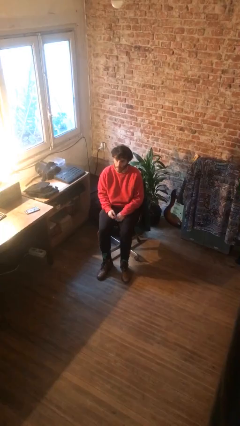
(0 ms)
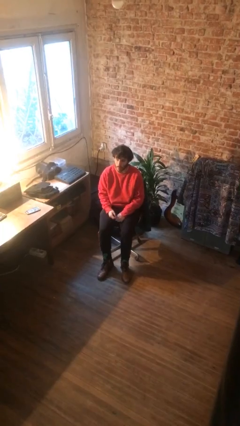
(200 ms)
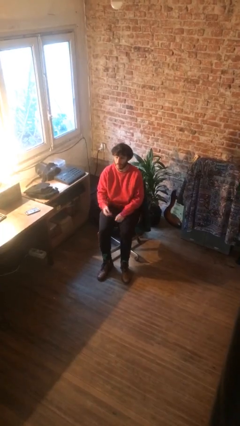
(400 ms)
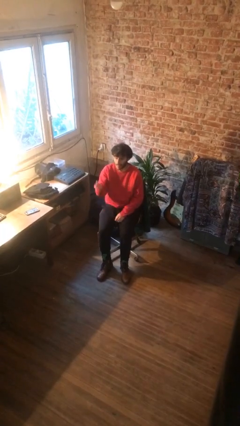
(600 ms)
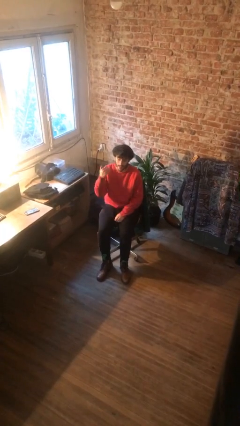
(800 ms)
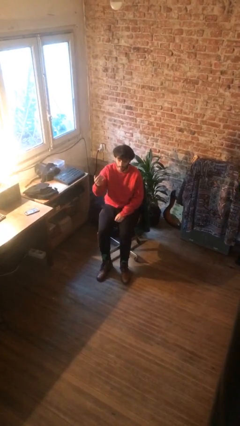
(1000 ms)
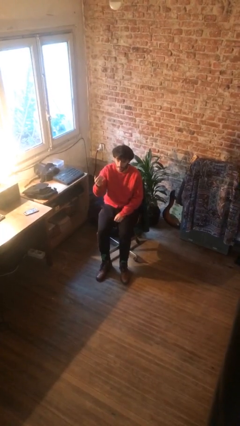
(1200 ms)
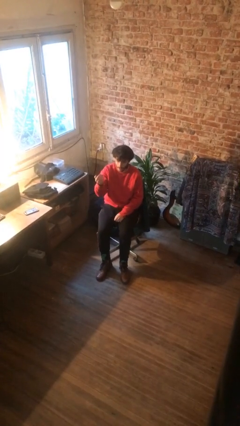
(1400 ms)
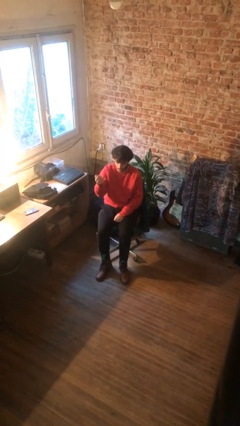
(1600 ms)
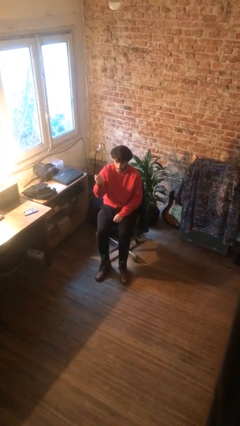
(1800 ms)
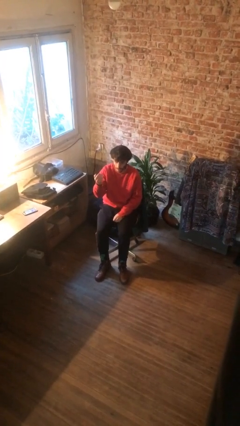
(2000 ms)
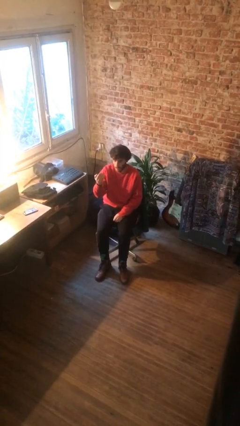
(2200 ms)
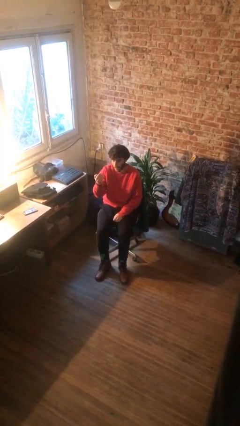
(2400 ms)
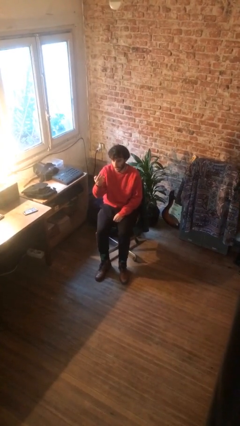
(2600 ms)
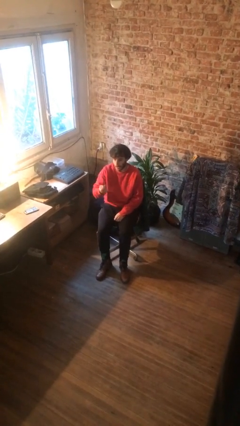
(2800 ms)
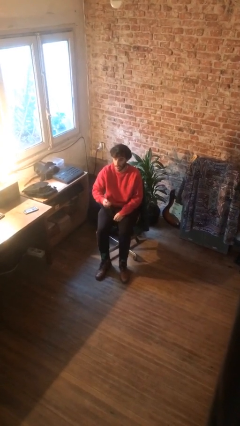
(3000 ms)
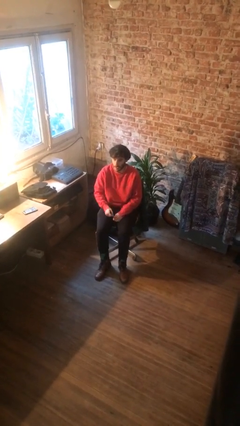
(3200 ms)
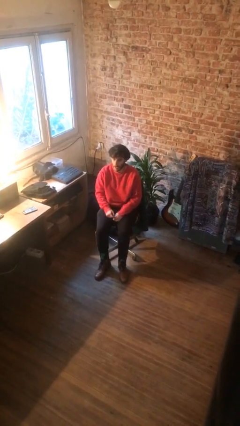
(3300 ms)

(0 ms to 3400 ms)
person gestures come here

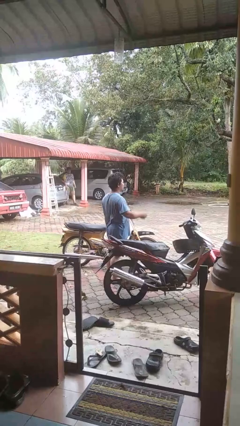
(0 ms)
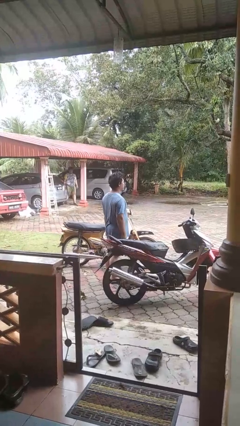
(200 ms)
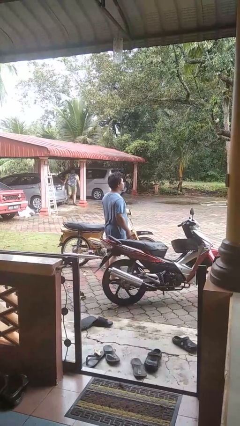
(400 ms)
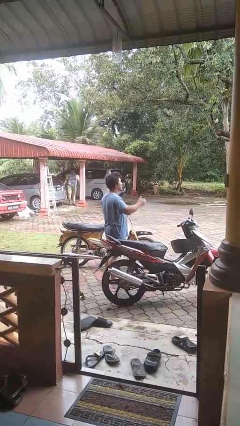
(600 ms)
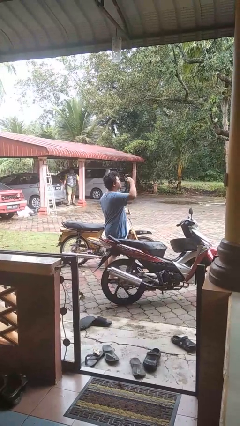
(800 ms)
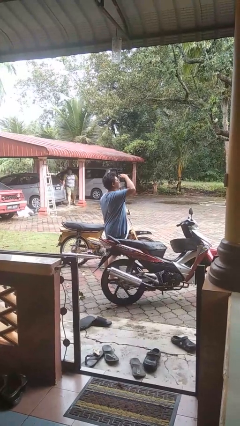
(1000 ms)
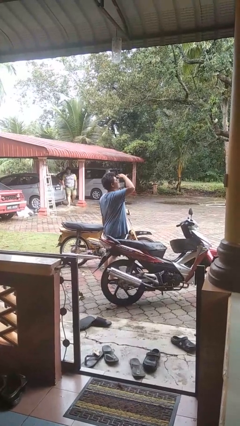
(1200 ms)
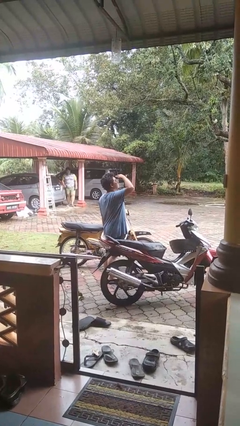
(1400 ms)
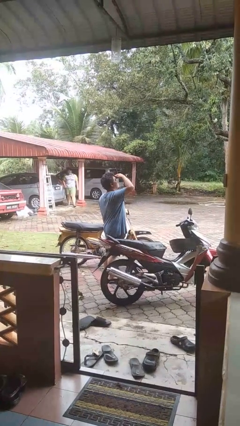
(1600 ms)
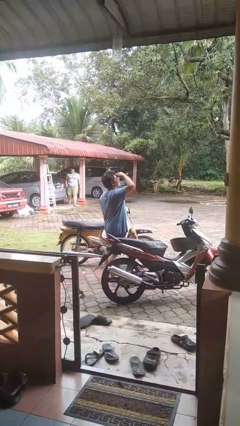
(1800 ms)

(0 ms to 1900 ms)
person shades eyes

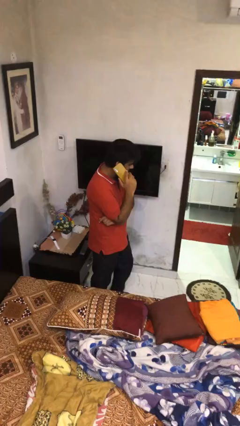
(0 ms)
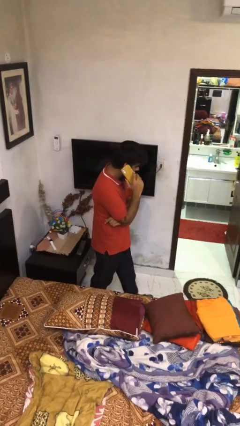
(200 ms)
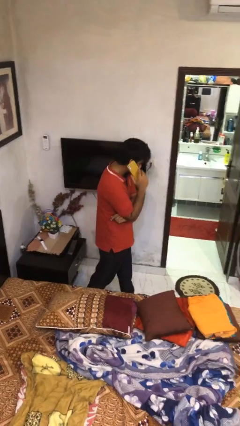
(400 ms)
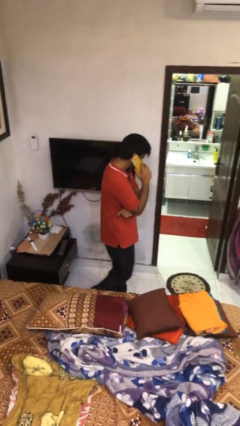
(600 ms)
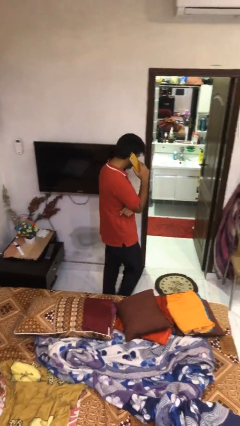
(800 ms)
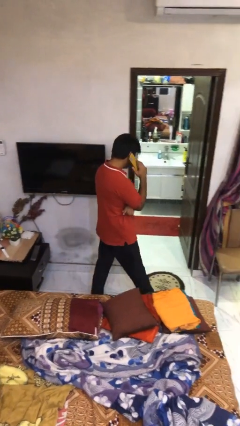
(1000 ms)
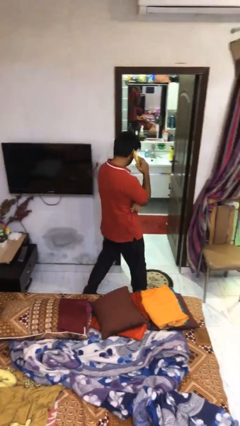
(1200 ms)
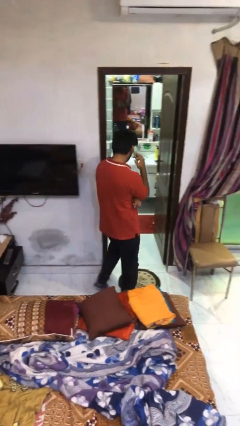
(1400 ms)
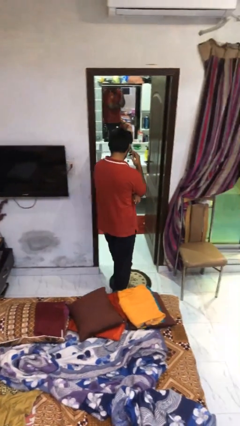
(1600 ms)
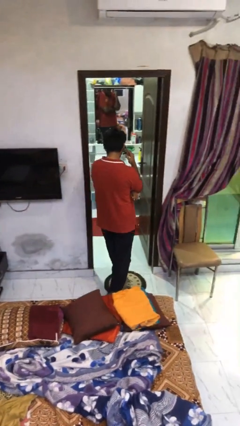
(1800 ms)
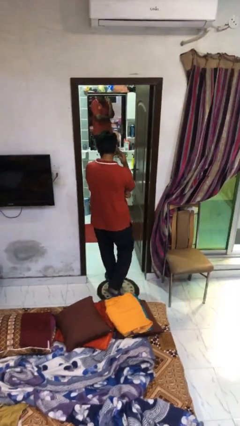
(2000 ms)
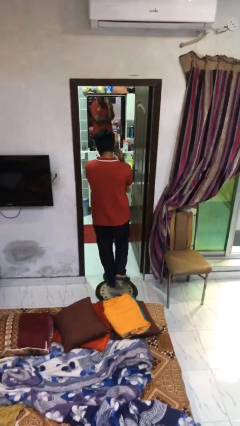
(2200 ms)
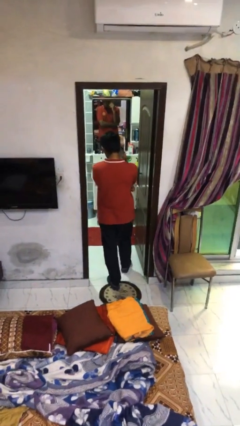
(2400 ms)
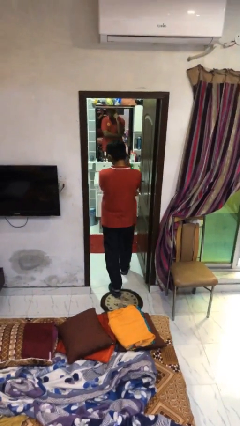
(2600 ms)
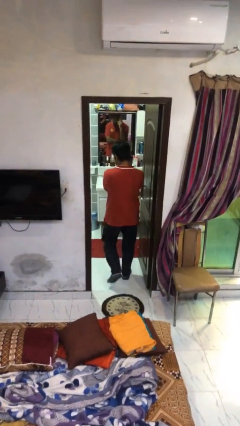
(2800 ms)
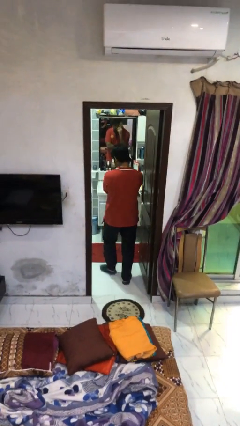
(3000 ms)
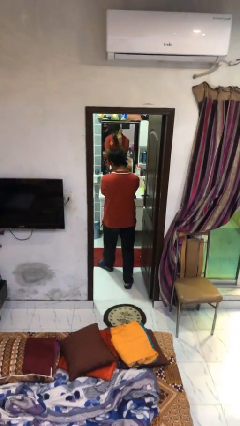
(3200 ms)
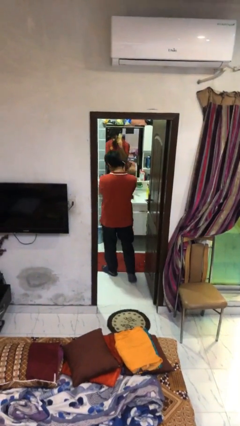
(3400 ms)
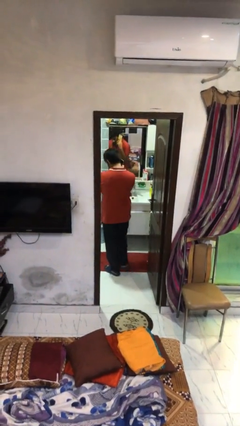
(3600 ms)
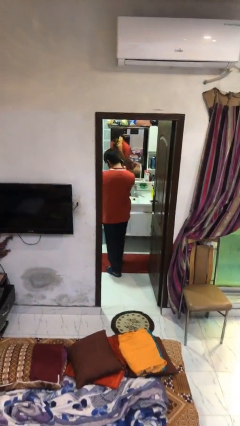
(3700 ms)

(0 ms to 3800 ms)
person exits scene through structure

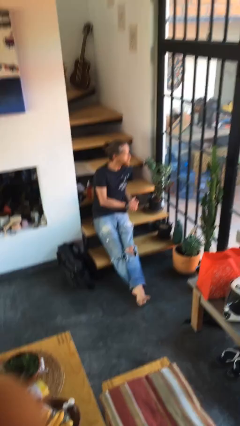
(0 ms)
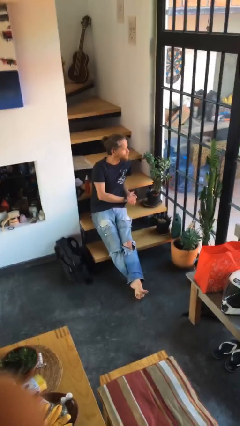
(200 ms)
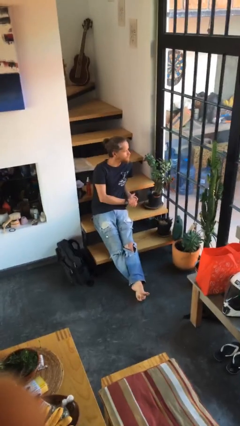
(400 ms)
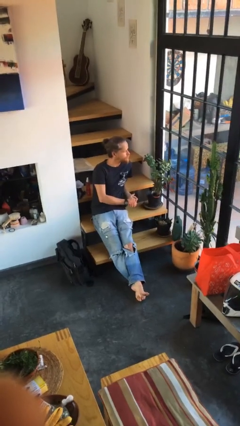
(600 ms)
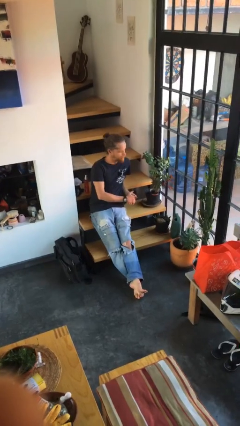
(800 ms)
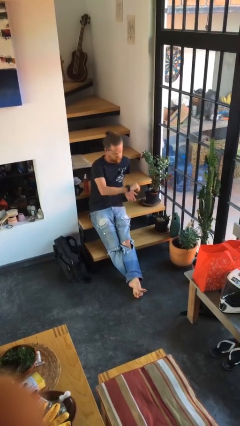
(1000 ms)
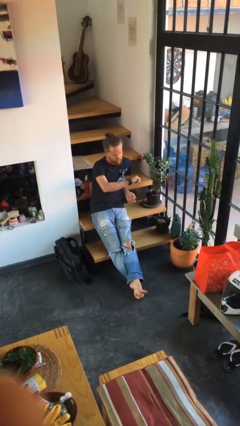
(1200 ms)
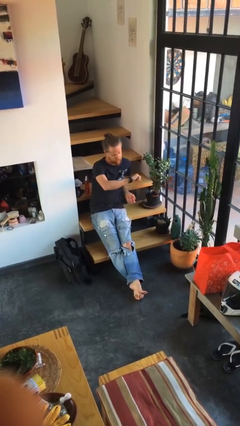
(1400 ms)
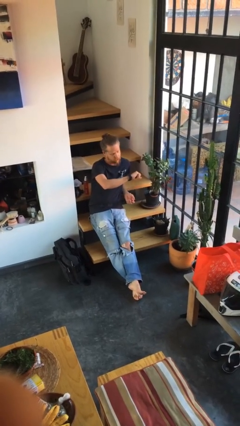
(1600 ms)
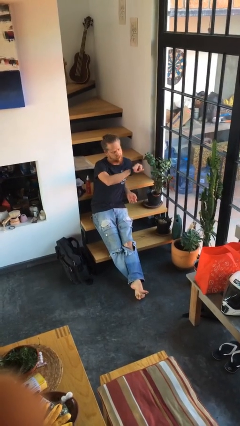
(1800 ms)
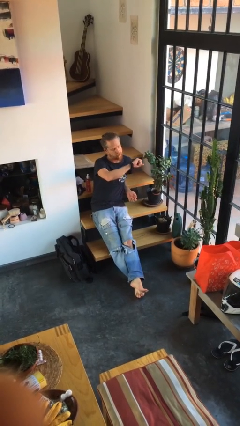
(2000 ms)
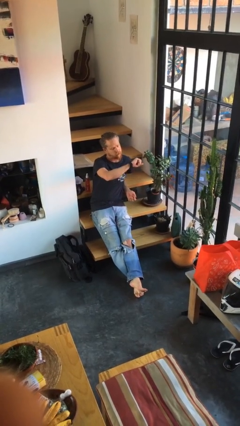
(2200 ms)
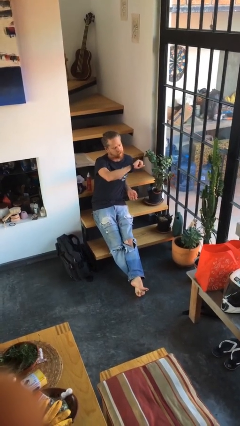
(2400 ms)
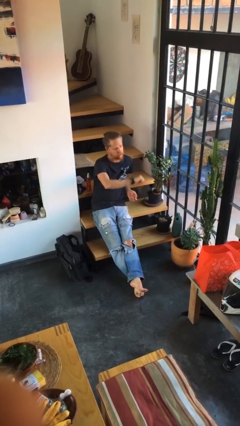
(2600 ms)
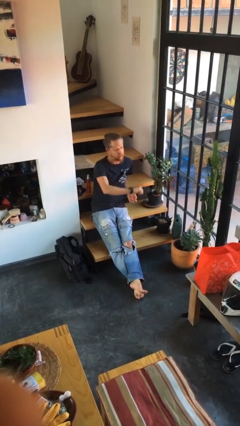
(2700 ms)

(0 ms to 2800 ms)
person looks at wristwatch

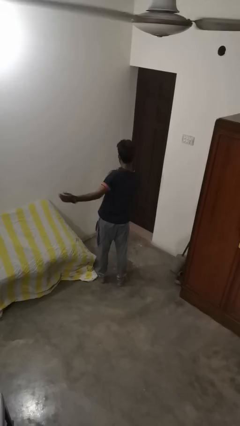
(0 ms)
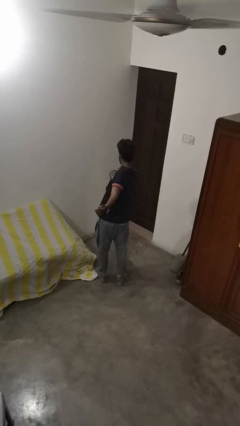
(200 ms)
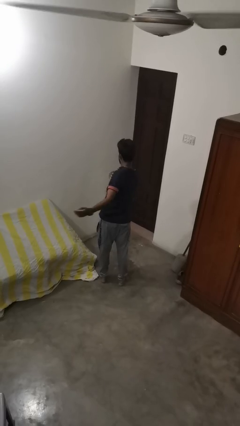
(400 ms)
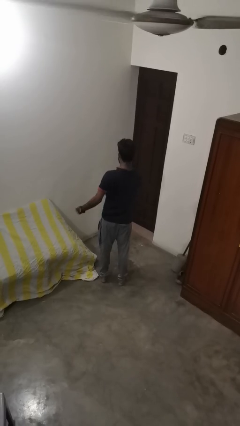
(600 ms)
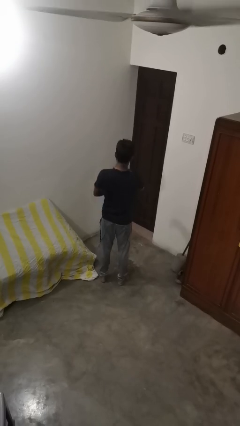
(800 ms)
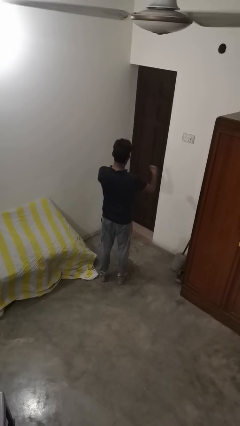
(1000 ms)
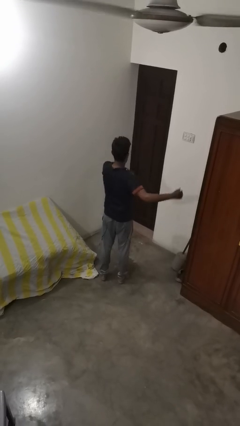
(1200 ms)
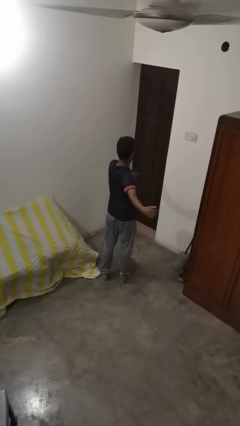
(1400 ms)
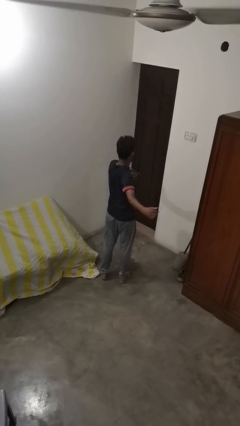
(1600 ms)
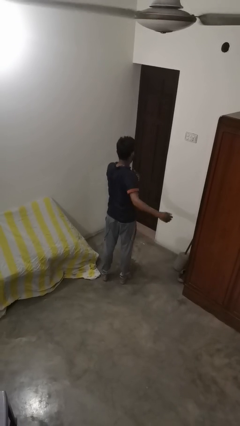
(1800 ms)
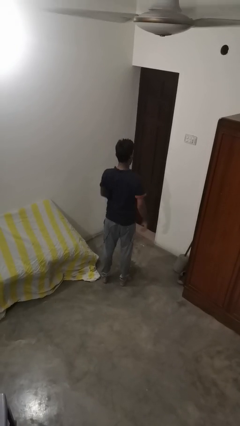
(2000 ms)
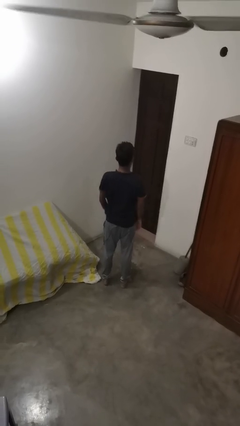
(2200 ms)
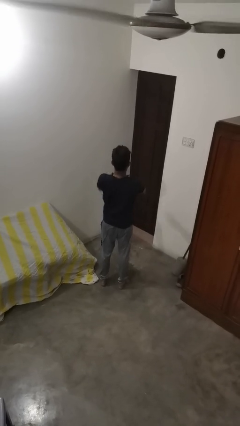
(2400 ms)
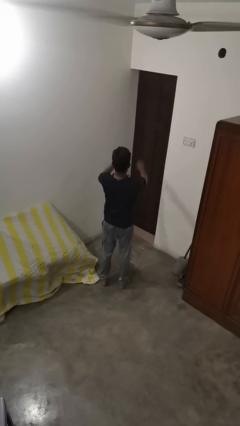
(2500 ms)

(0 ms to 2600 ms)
person stretches arms to side

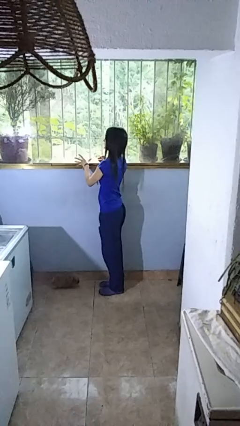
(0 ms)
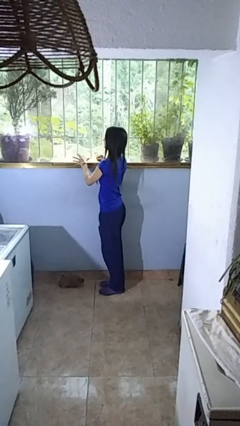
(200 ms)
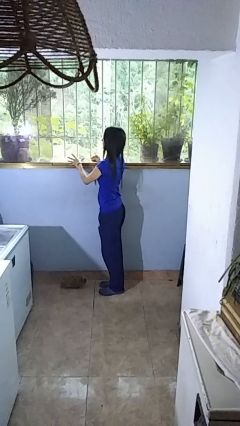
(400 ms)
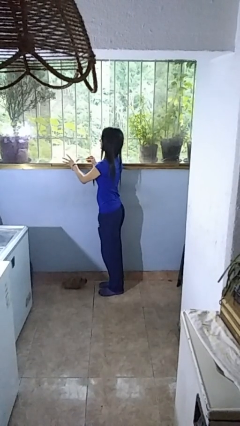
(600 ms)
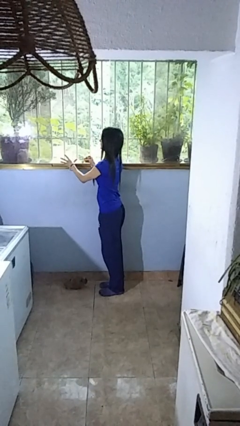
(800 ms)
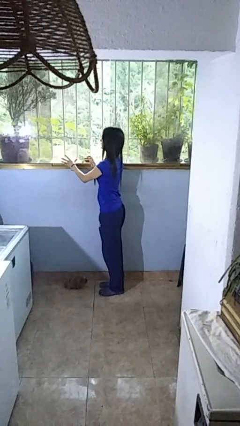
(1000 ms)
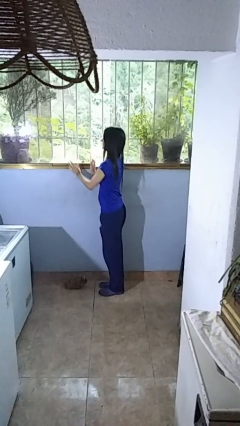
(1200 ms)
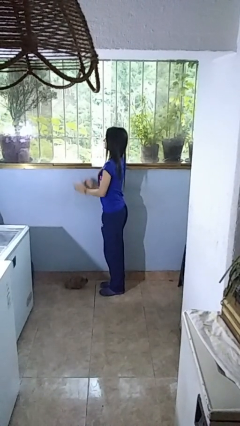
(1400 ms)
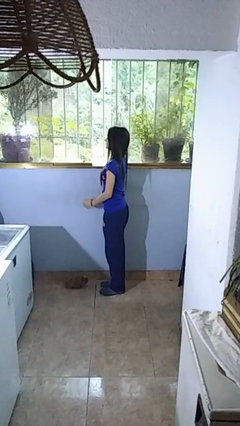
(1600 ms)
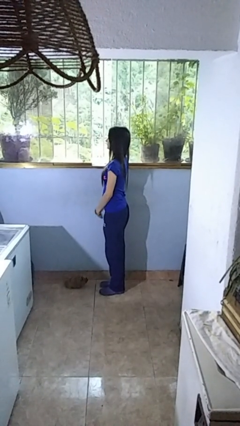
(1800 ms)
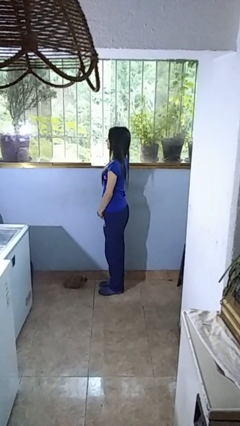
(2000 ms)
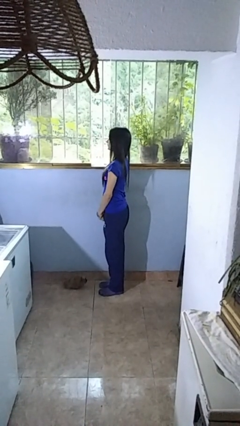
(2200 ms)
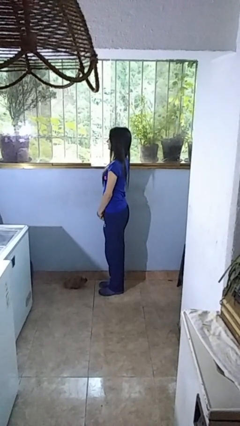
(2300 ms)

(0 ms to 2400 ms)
person opens home window

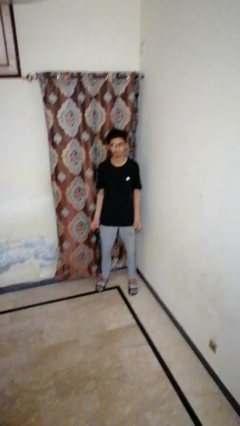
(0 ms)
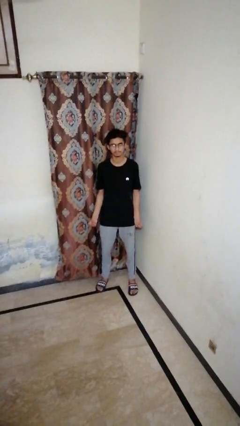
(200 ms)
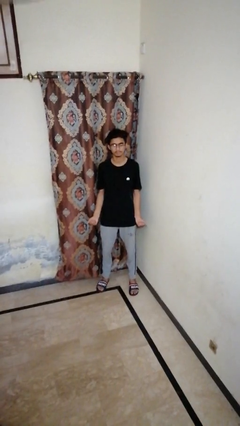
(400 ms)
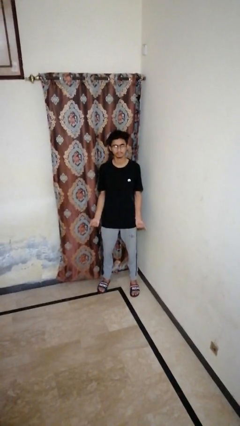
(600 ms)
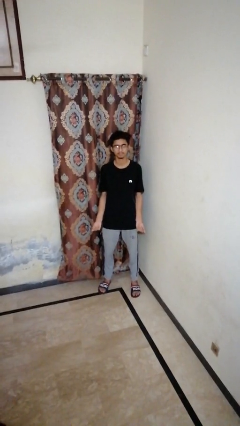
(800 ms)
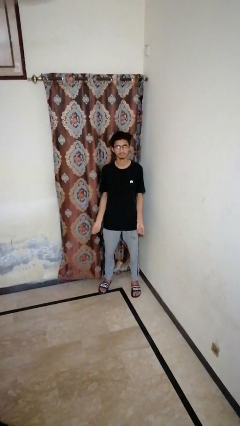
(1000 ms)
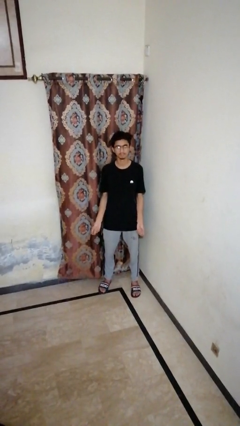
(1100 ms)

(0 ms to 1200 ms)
person snaps fingers
